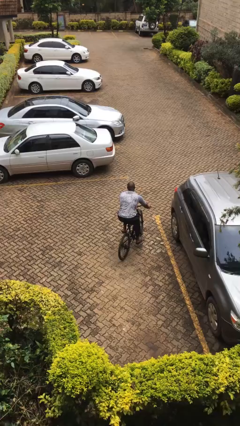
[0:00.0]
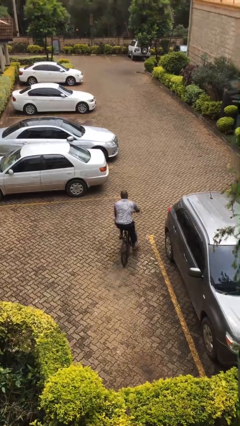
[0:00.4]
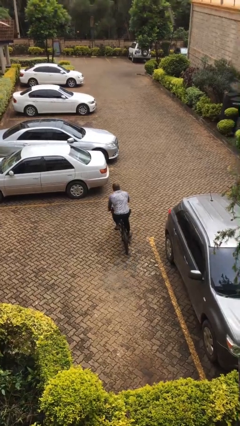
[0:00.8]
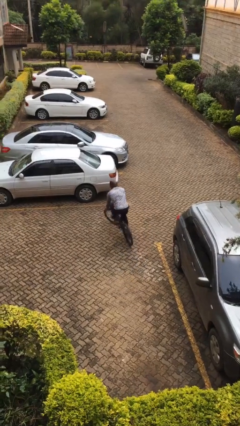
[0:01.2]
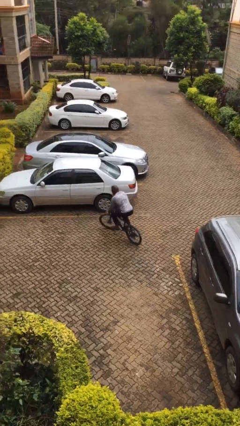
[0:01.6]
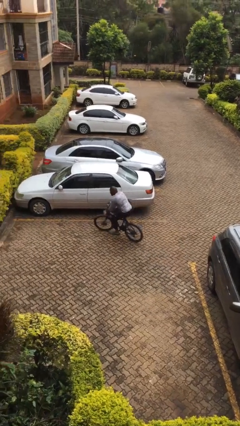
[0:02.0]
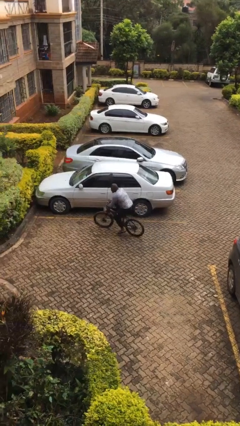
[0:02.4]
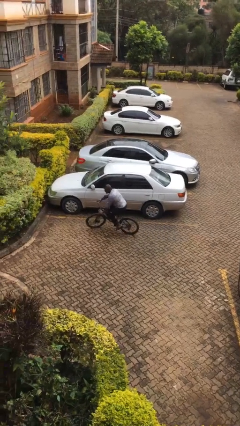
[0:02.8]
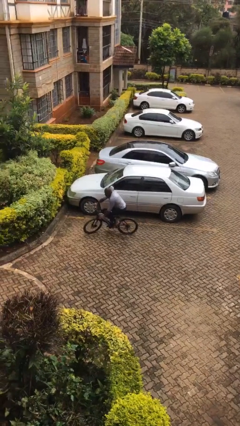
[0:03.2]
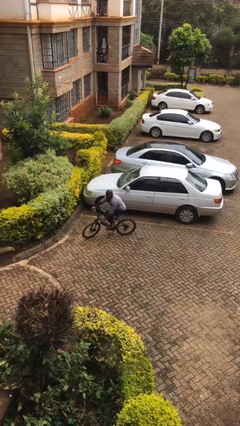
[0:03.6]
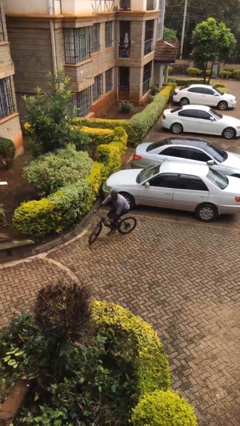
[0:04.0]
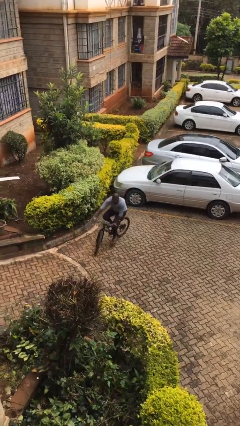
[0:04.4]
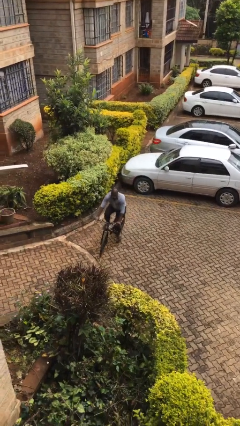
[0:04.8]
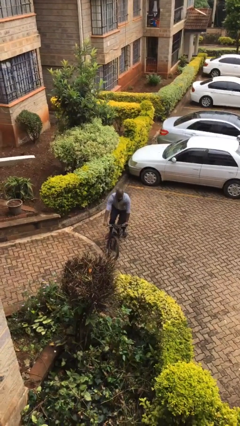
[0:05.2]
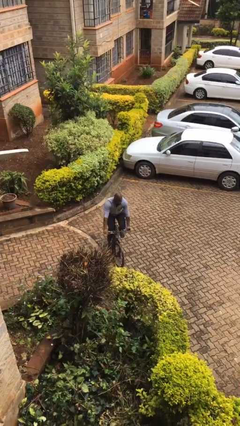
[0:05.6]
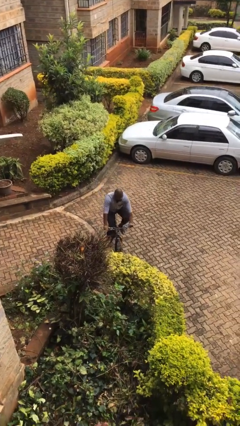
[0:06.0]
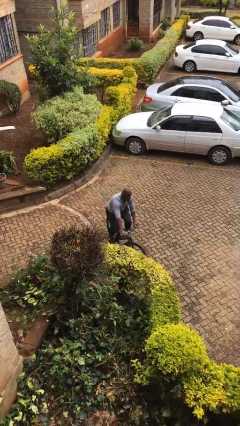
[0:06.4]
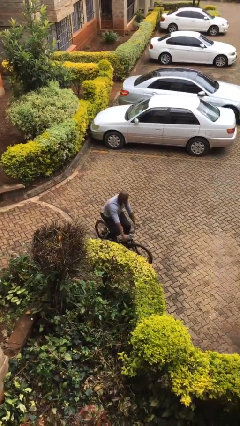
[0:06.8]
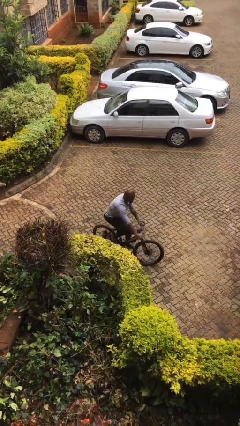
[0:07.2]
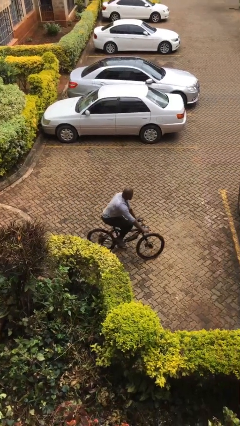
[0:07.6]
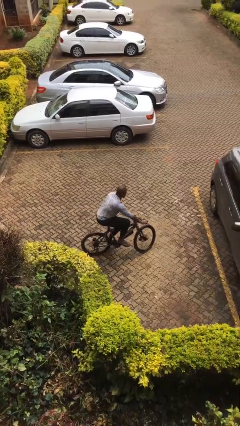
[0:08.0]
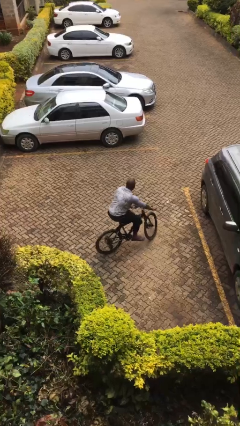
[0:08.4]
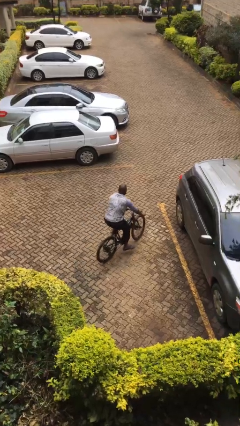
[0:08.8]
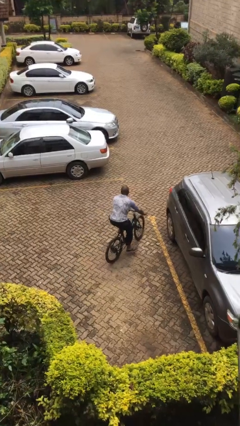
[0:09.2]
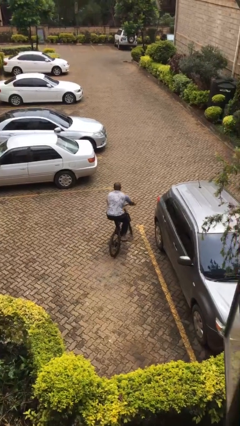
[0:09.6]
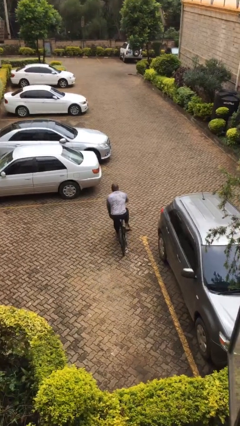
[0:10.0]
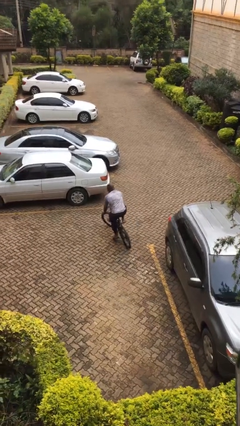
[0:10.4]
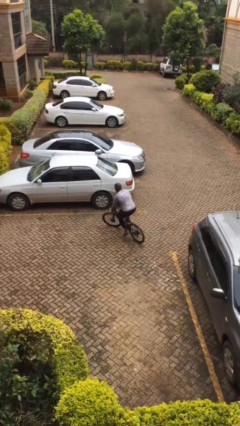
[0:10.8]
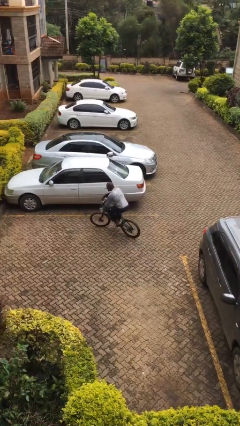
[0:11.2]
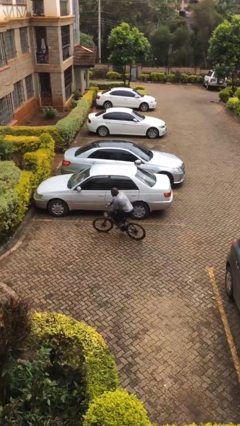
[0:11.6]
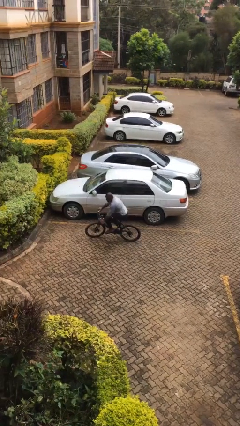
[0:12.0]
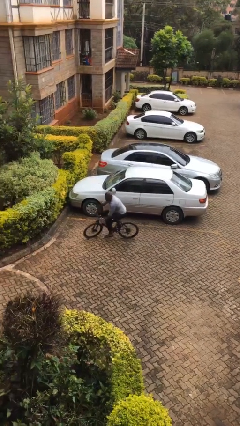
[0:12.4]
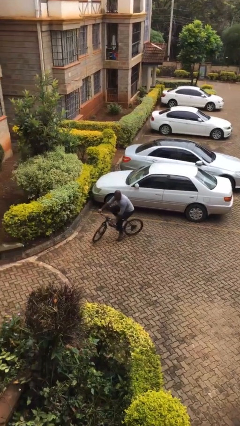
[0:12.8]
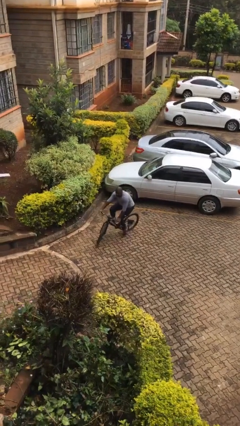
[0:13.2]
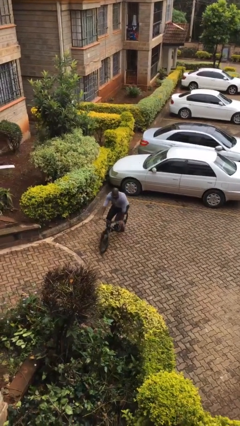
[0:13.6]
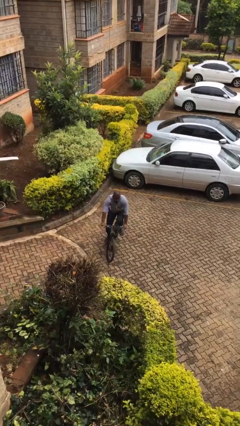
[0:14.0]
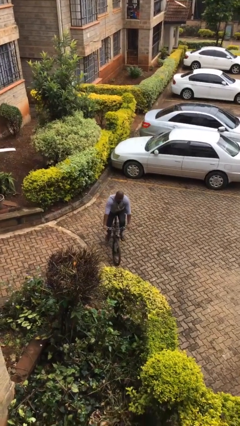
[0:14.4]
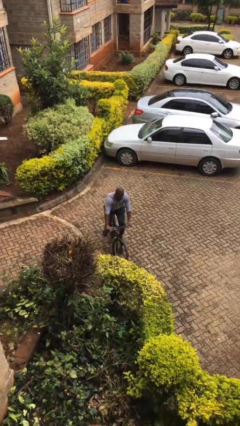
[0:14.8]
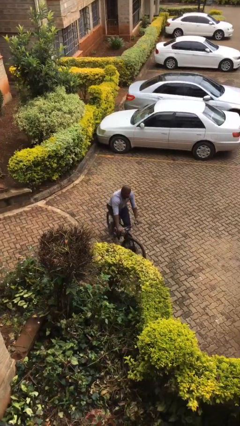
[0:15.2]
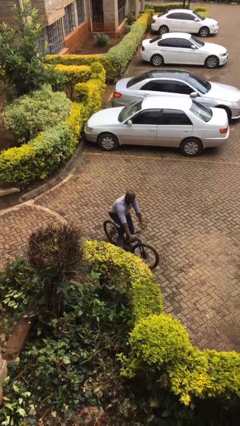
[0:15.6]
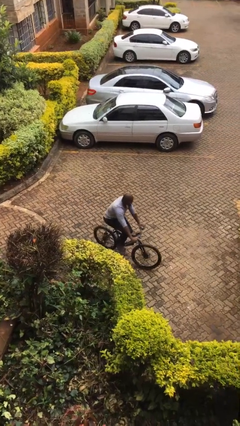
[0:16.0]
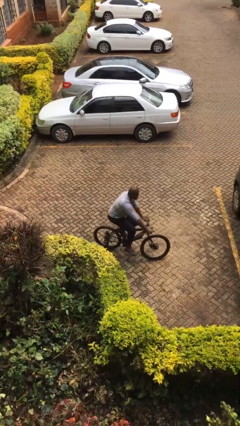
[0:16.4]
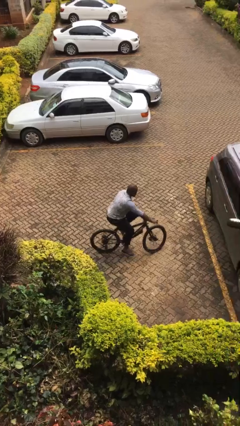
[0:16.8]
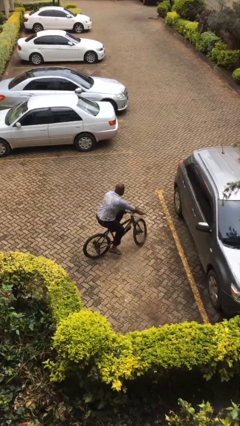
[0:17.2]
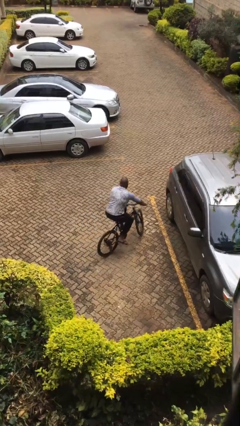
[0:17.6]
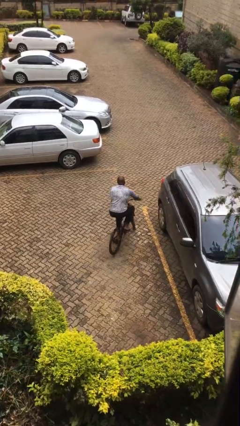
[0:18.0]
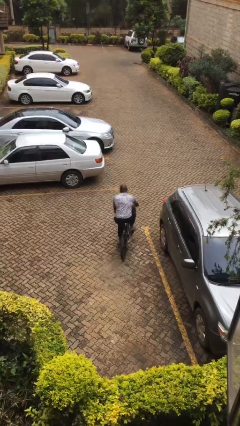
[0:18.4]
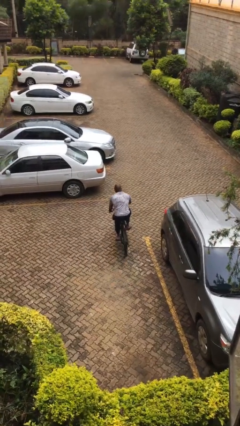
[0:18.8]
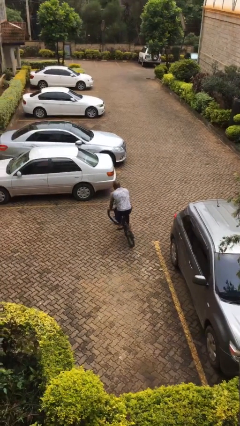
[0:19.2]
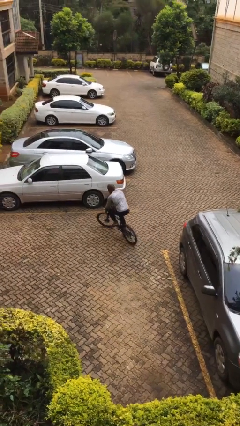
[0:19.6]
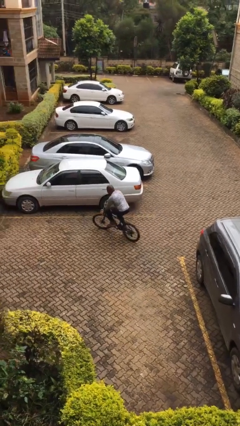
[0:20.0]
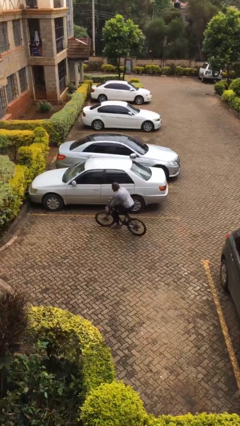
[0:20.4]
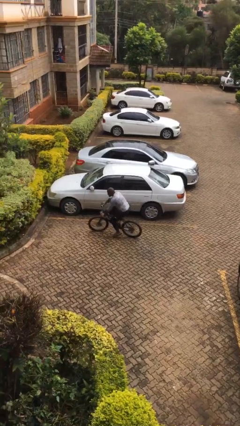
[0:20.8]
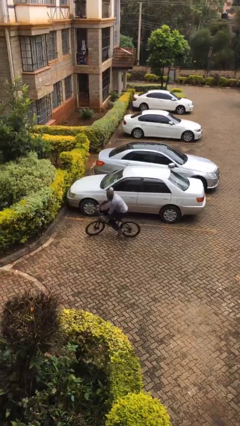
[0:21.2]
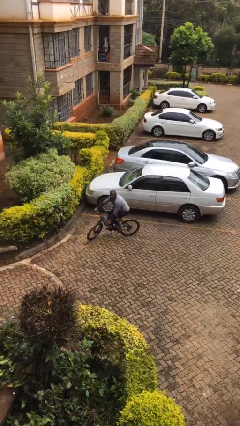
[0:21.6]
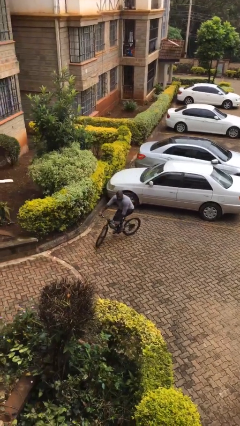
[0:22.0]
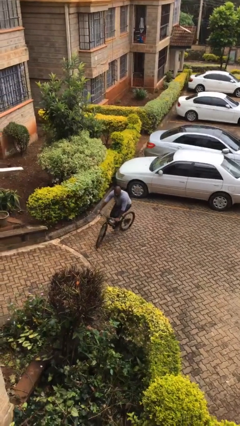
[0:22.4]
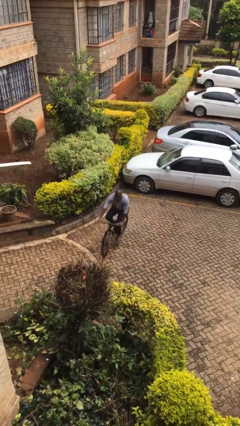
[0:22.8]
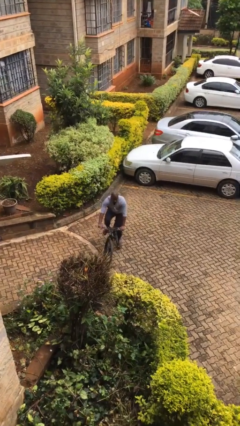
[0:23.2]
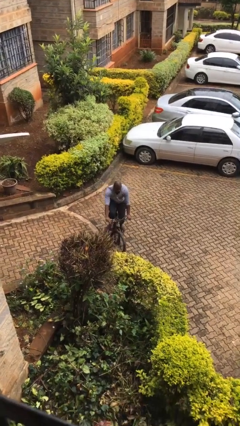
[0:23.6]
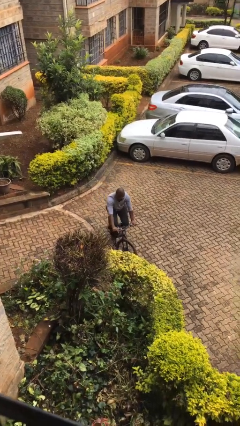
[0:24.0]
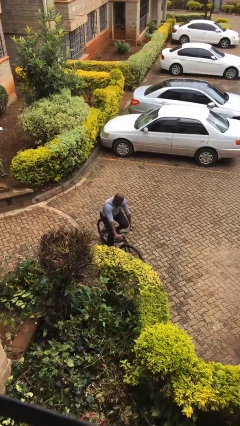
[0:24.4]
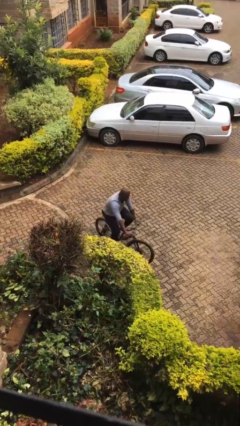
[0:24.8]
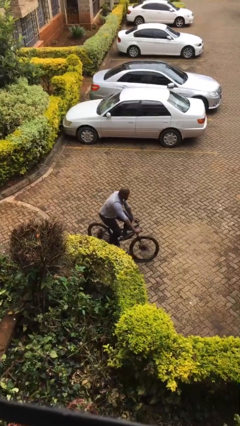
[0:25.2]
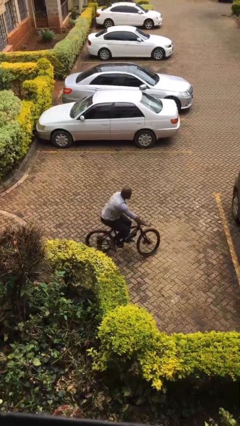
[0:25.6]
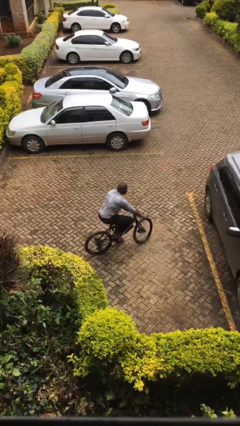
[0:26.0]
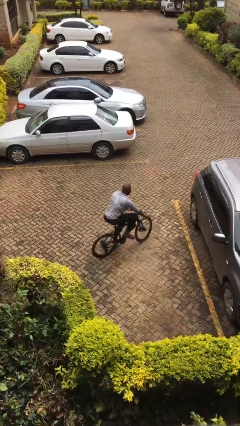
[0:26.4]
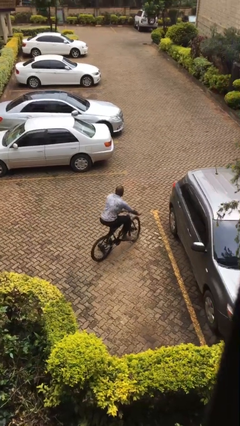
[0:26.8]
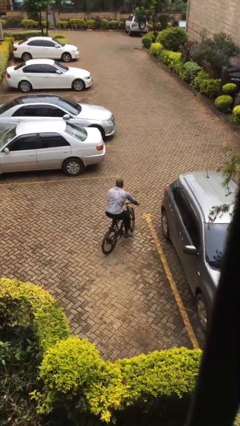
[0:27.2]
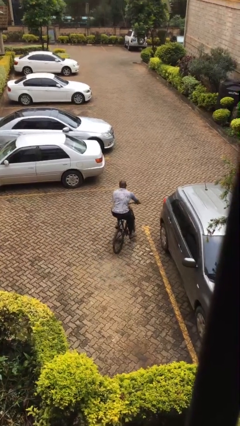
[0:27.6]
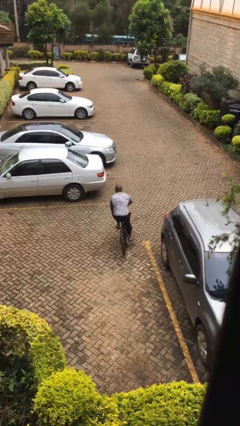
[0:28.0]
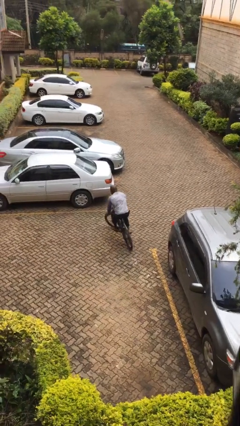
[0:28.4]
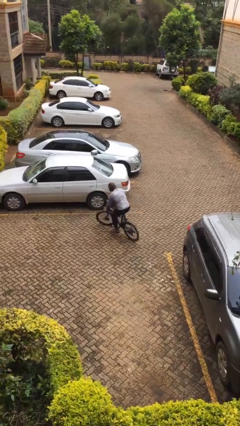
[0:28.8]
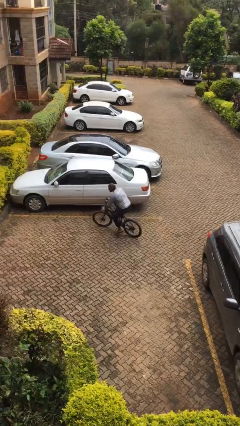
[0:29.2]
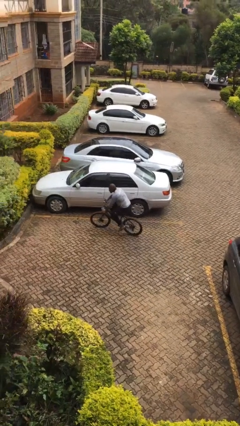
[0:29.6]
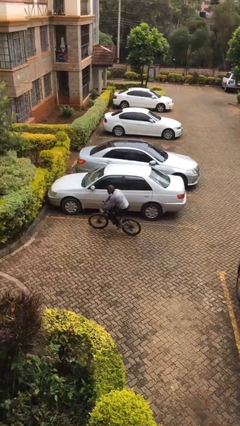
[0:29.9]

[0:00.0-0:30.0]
person rides bicycle

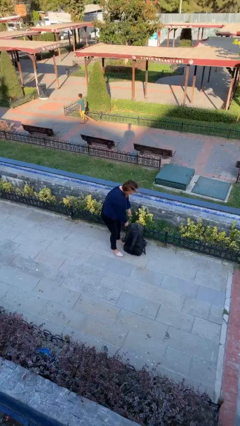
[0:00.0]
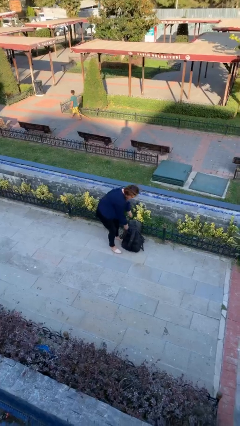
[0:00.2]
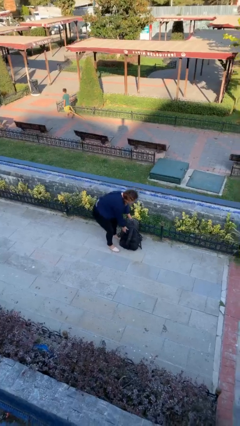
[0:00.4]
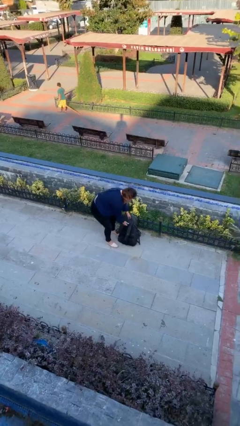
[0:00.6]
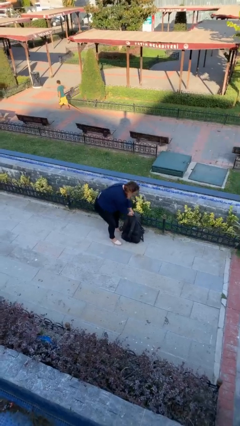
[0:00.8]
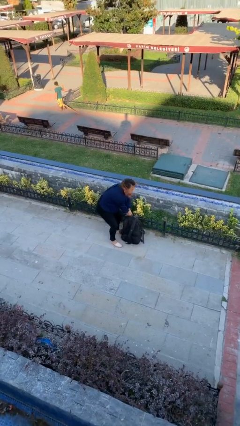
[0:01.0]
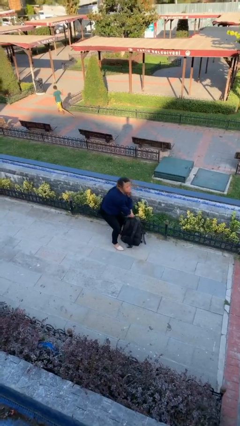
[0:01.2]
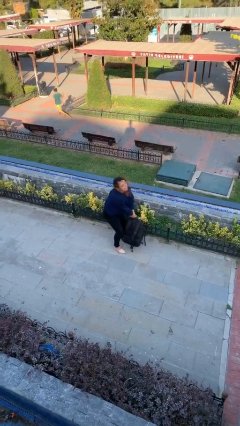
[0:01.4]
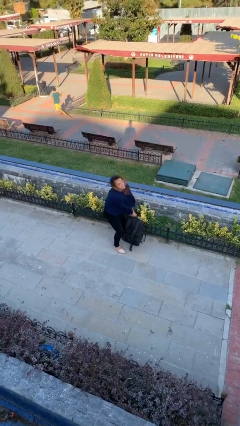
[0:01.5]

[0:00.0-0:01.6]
person picks up object from floor

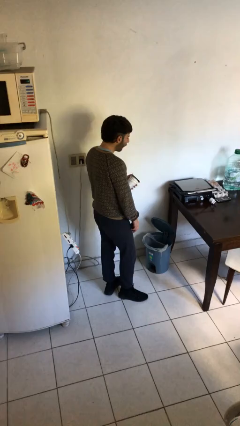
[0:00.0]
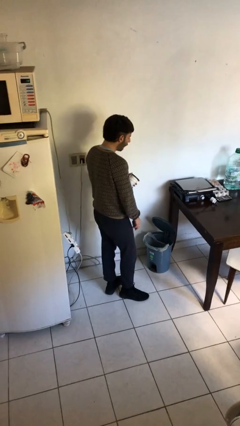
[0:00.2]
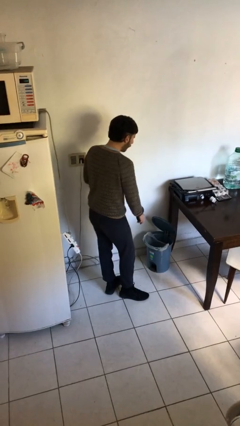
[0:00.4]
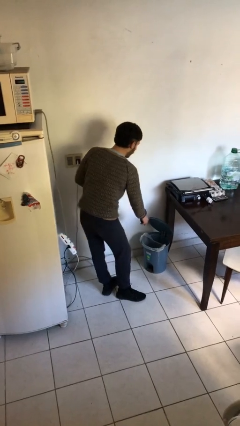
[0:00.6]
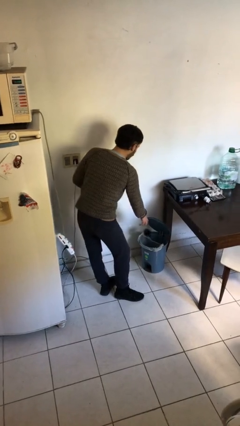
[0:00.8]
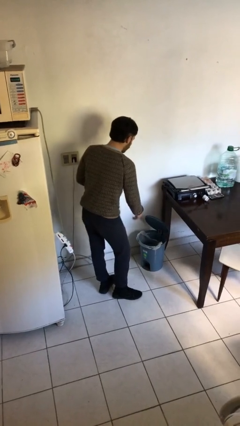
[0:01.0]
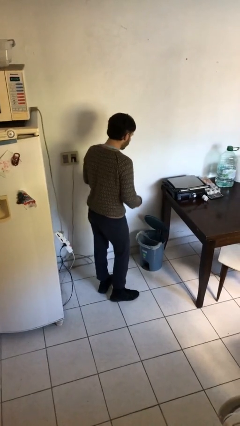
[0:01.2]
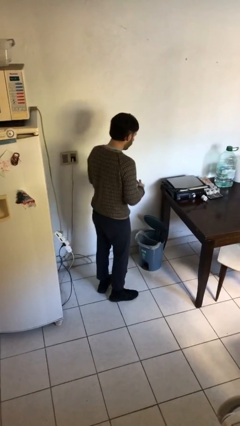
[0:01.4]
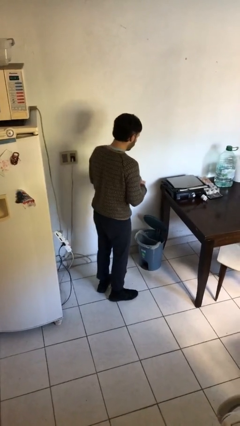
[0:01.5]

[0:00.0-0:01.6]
person discards trash
